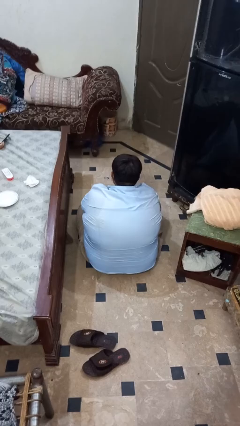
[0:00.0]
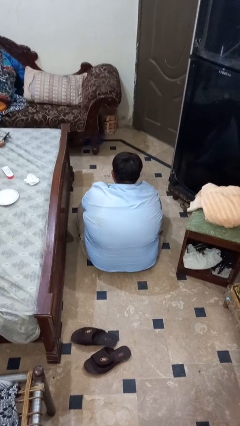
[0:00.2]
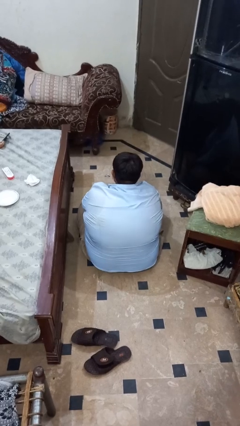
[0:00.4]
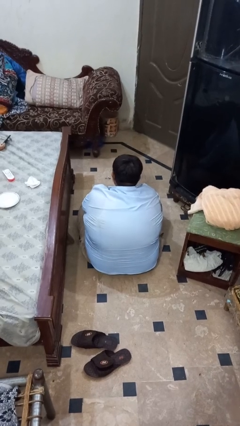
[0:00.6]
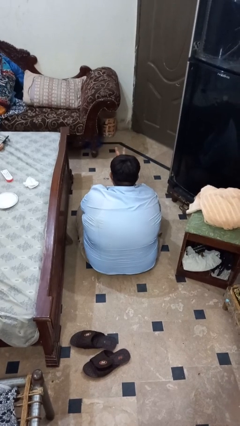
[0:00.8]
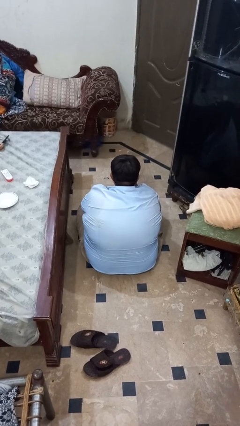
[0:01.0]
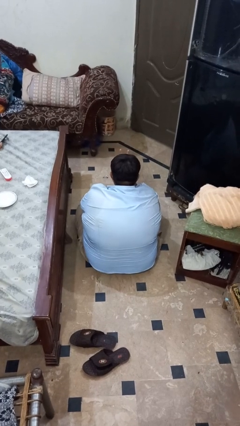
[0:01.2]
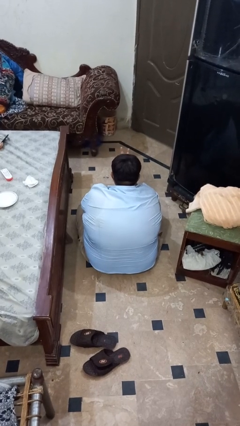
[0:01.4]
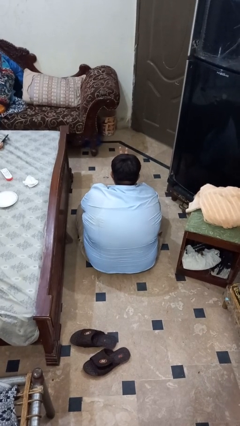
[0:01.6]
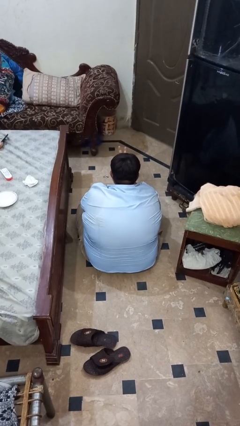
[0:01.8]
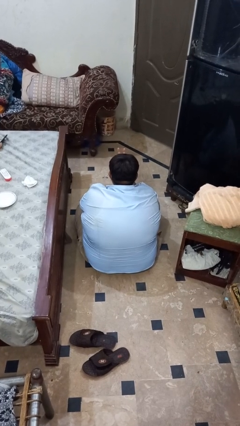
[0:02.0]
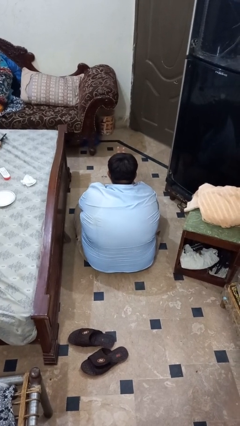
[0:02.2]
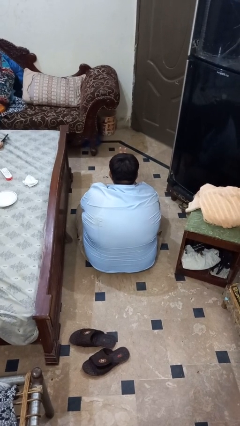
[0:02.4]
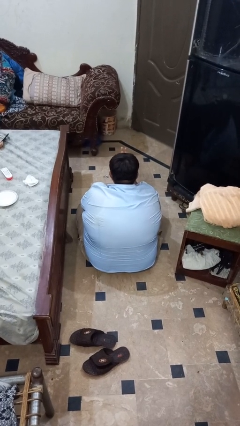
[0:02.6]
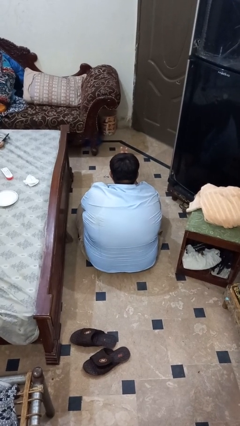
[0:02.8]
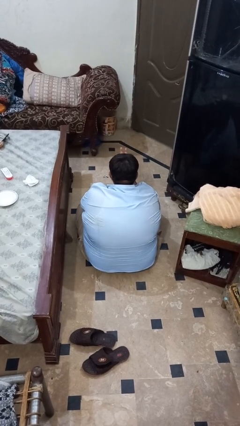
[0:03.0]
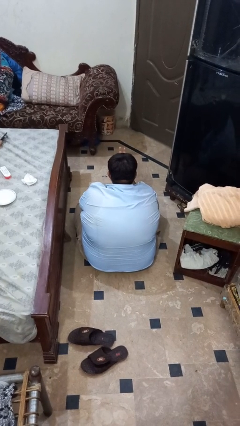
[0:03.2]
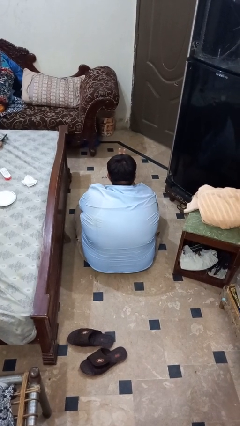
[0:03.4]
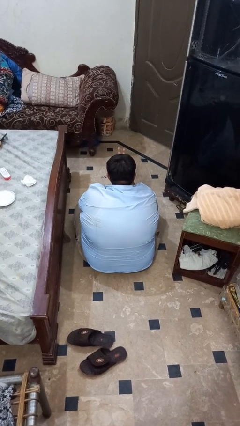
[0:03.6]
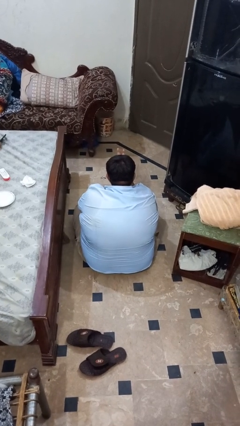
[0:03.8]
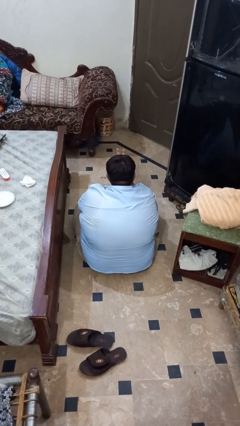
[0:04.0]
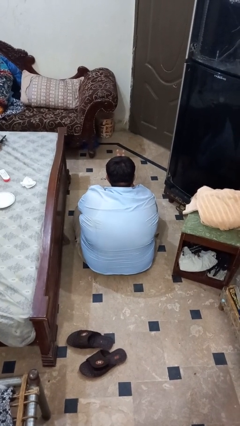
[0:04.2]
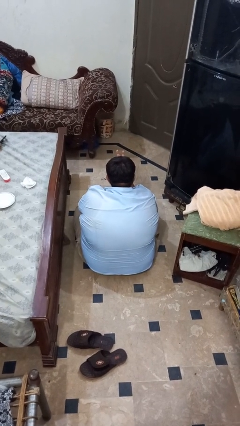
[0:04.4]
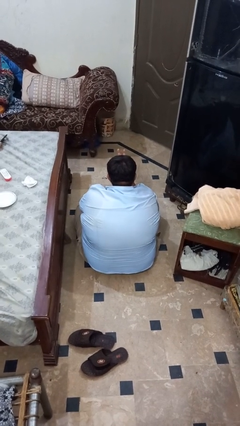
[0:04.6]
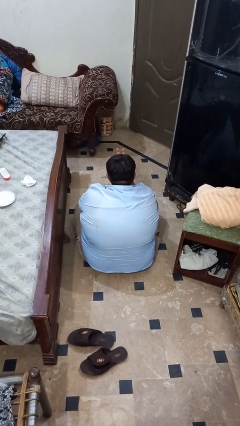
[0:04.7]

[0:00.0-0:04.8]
person gestures watch closely

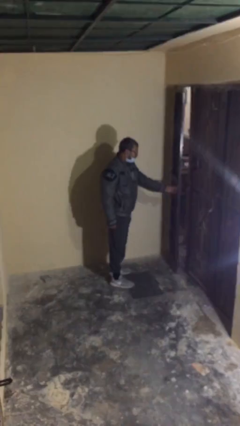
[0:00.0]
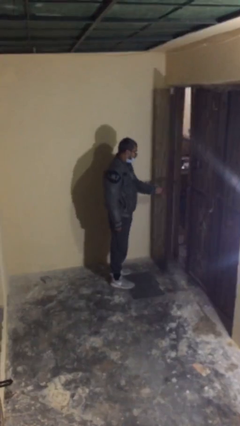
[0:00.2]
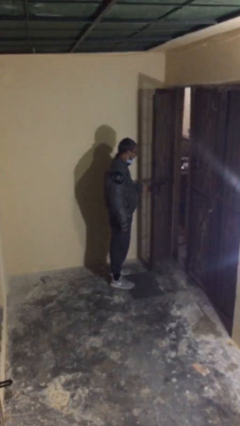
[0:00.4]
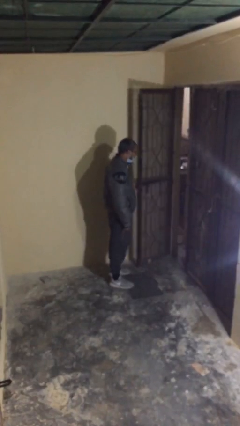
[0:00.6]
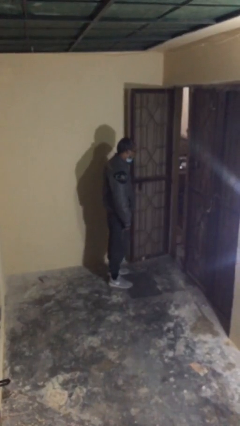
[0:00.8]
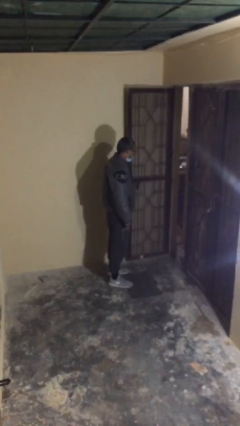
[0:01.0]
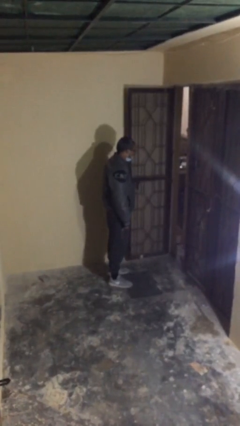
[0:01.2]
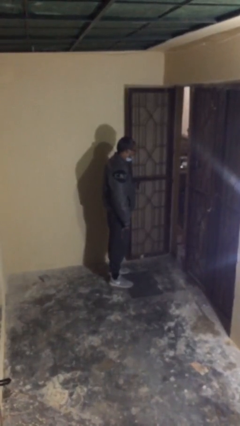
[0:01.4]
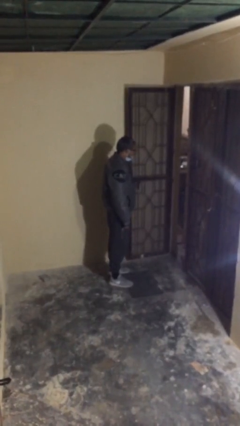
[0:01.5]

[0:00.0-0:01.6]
person opens facility door

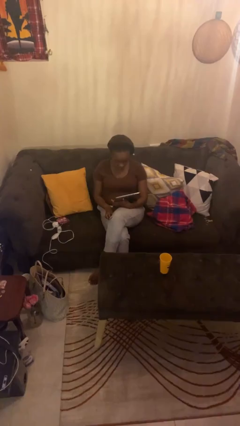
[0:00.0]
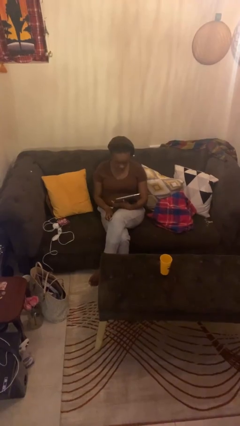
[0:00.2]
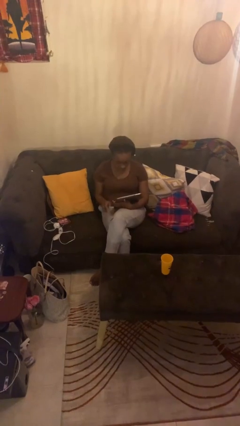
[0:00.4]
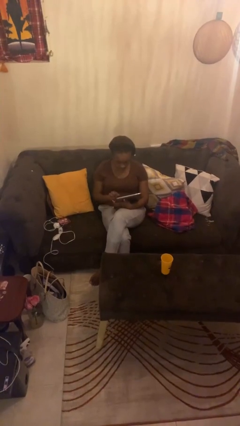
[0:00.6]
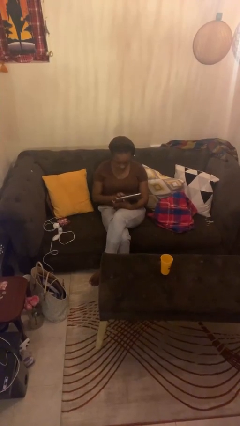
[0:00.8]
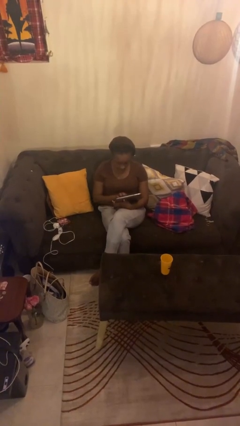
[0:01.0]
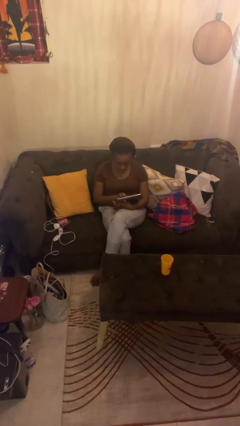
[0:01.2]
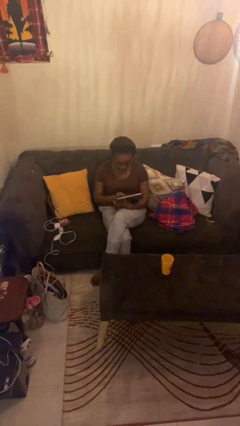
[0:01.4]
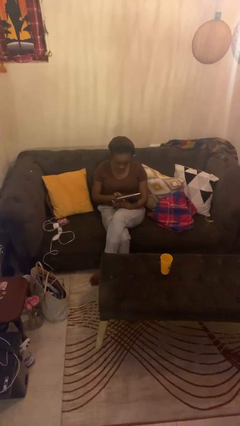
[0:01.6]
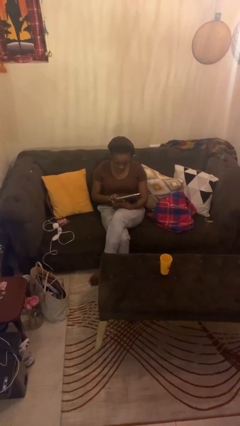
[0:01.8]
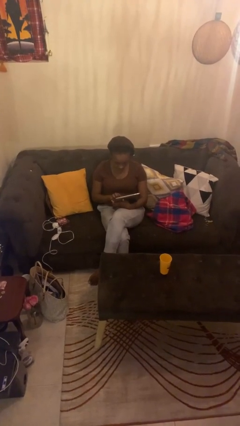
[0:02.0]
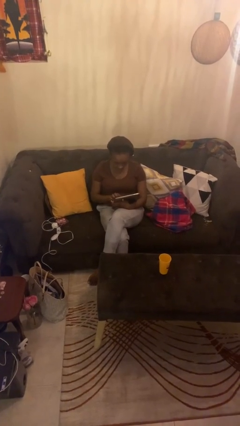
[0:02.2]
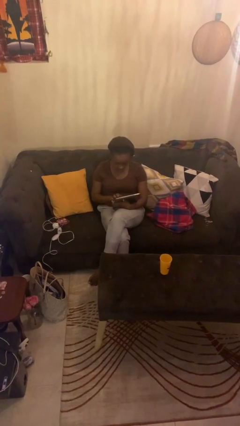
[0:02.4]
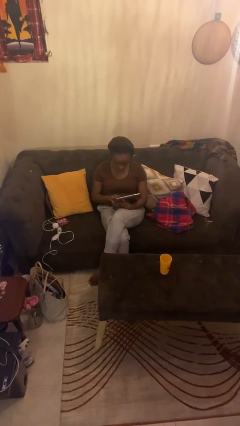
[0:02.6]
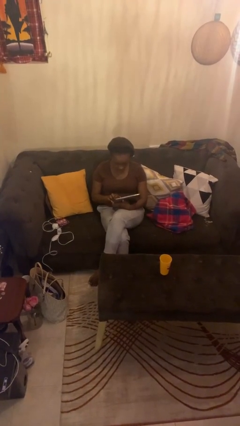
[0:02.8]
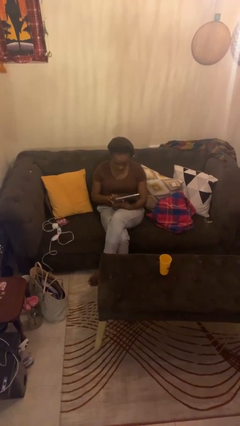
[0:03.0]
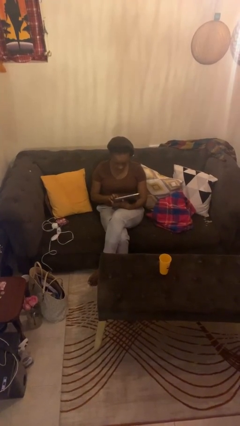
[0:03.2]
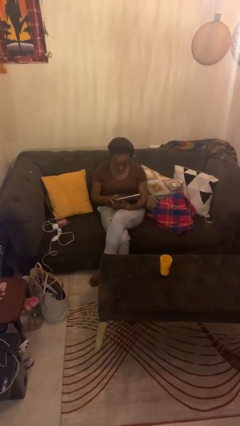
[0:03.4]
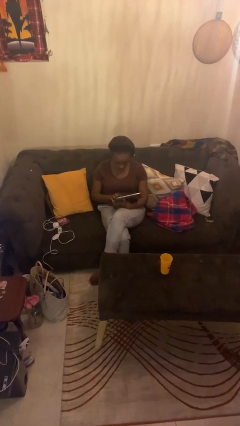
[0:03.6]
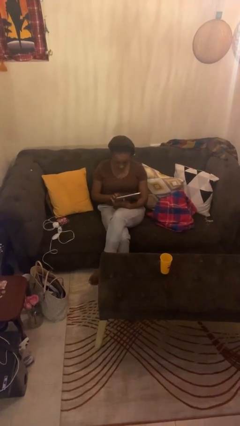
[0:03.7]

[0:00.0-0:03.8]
person interacts with tablet

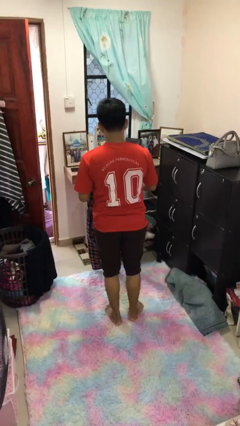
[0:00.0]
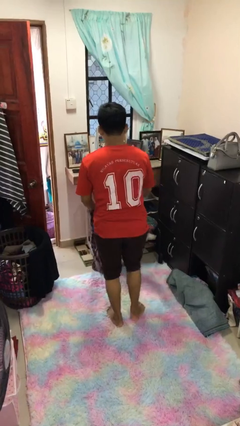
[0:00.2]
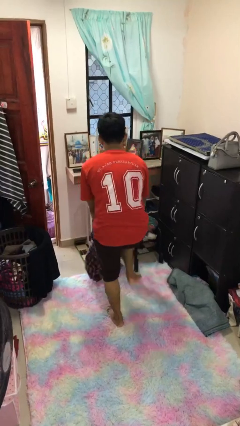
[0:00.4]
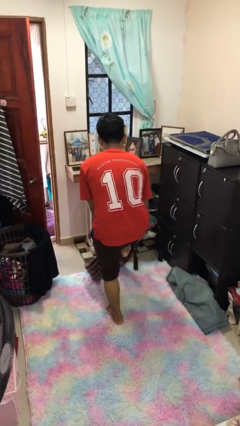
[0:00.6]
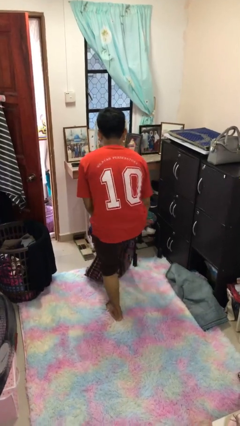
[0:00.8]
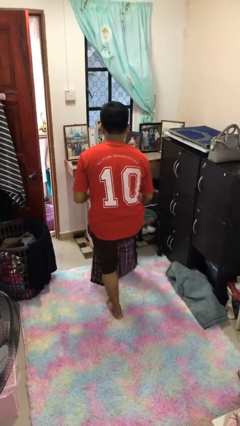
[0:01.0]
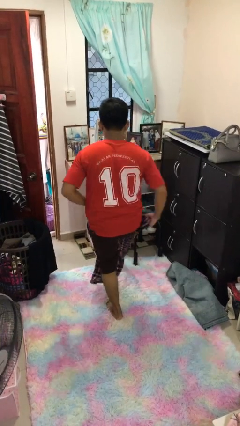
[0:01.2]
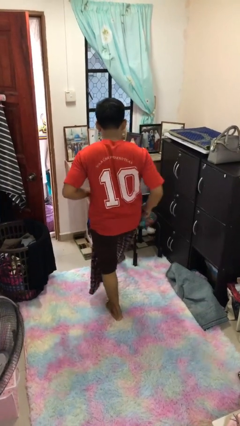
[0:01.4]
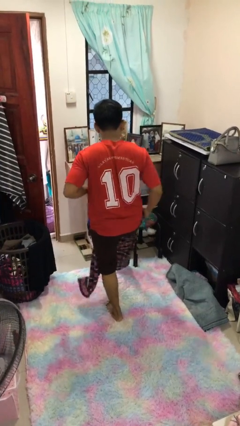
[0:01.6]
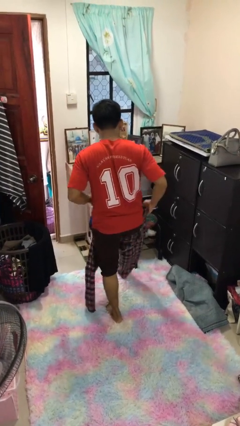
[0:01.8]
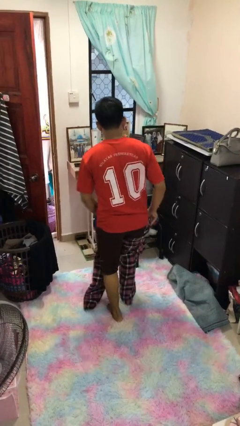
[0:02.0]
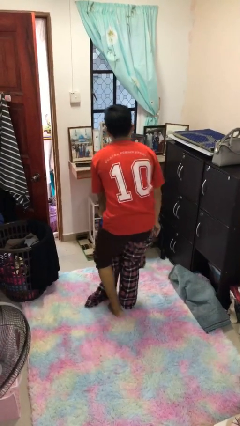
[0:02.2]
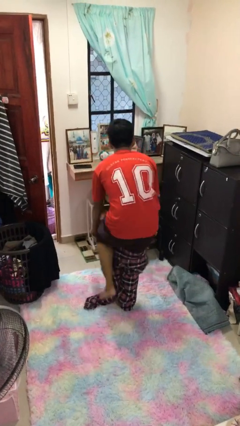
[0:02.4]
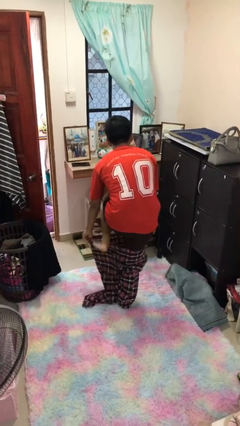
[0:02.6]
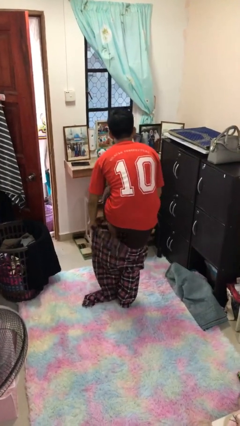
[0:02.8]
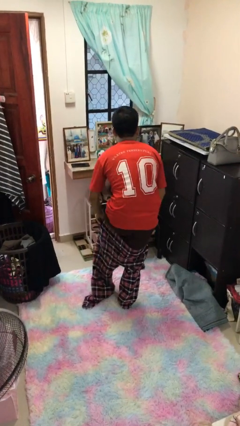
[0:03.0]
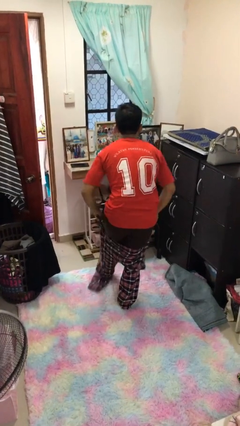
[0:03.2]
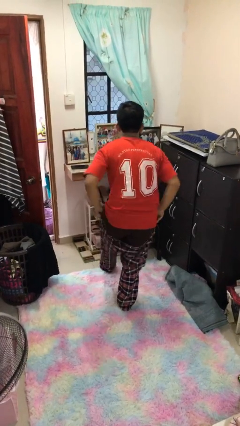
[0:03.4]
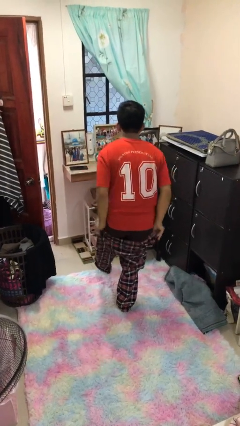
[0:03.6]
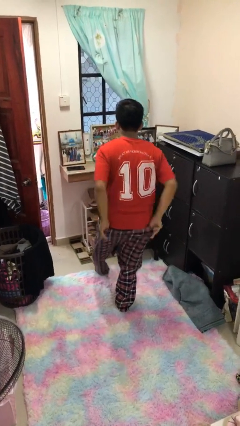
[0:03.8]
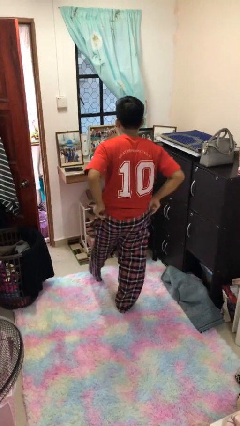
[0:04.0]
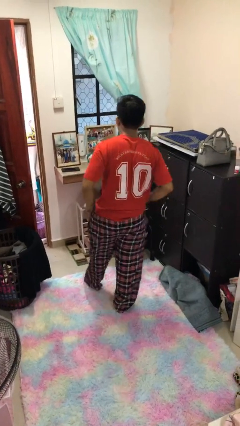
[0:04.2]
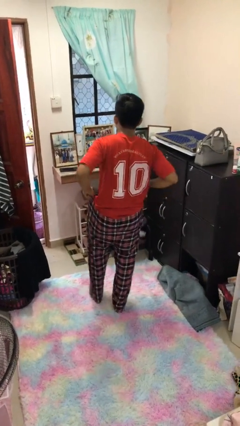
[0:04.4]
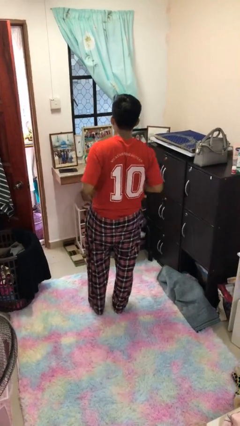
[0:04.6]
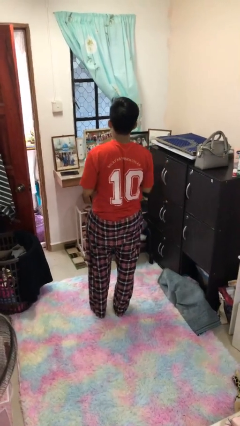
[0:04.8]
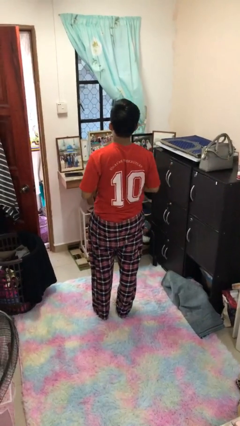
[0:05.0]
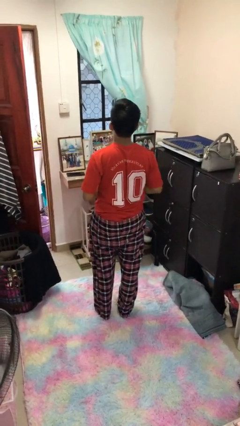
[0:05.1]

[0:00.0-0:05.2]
person puts on pants

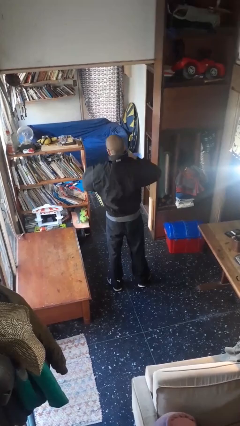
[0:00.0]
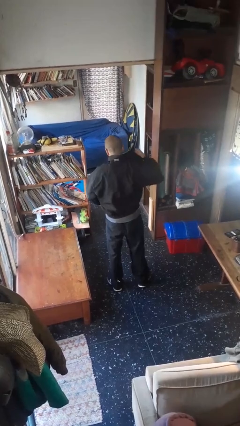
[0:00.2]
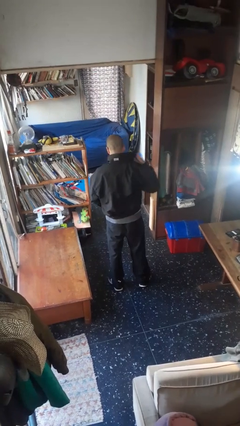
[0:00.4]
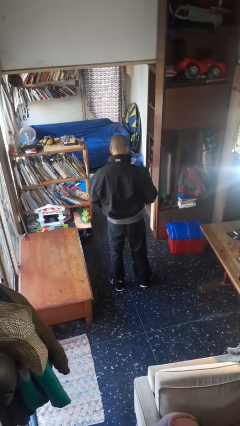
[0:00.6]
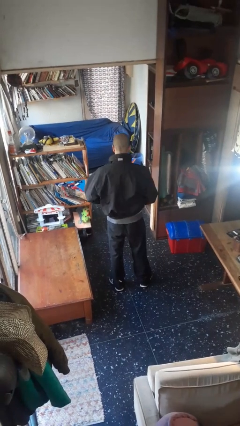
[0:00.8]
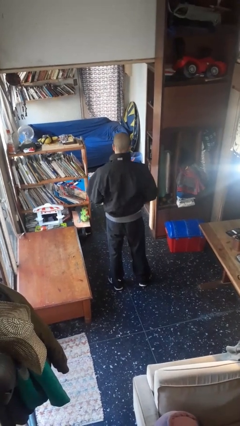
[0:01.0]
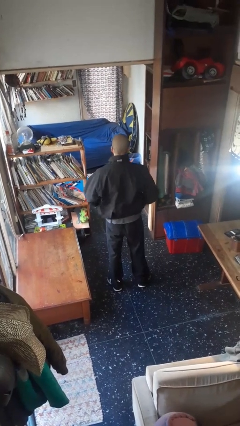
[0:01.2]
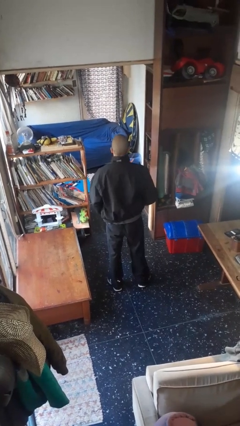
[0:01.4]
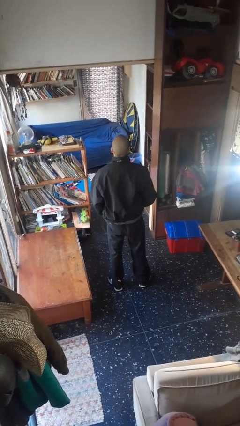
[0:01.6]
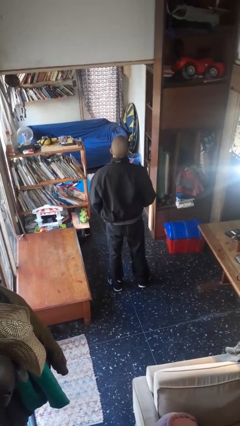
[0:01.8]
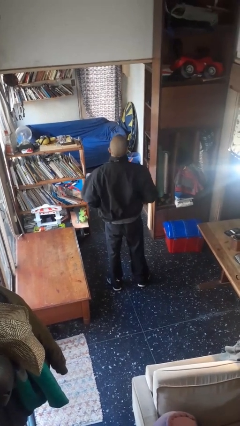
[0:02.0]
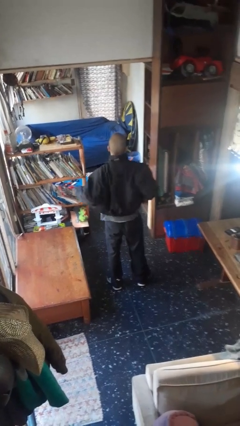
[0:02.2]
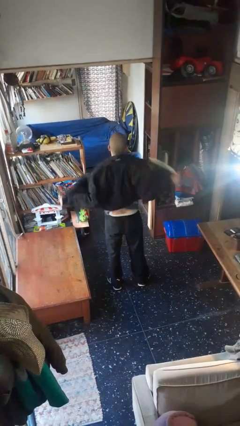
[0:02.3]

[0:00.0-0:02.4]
person unzips jacket
